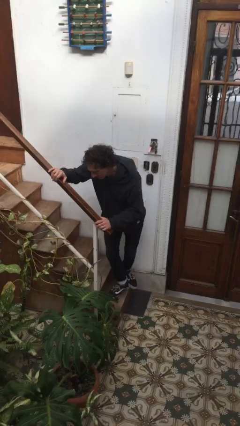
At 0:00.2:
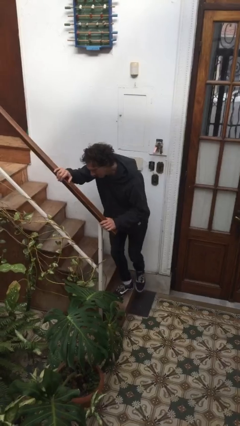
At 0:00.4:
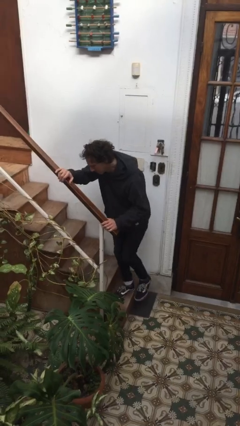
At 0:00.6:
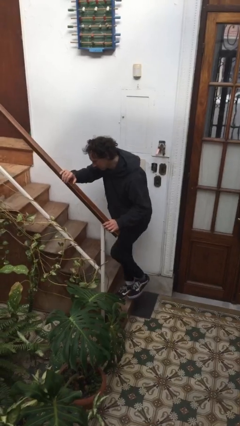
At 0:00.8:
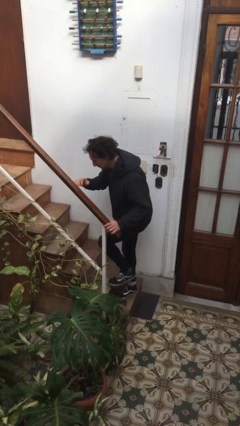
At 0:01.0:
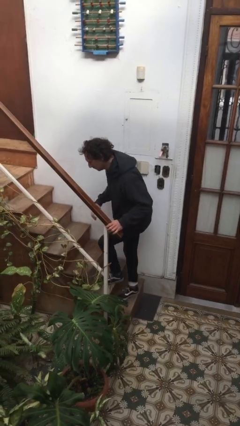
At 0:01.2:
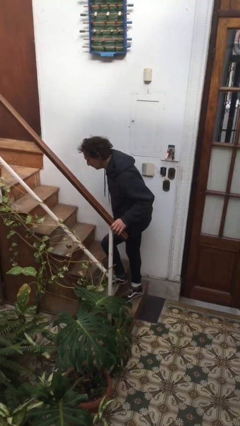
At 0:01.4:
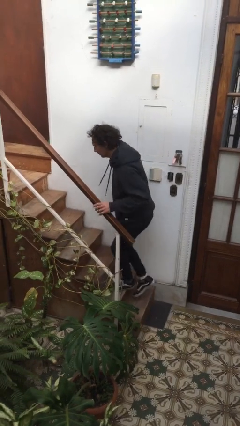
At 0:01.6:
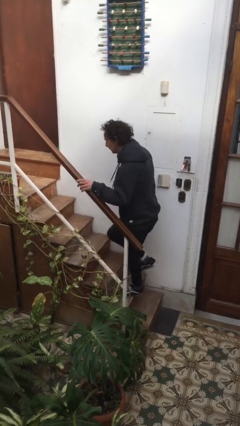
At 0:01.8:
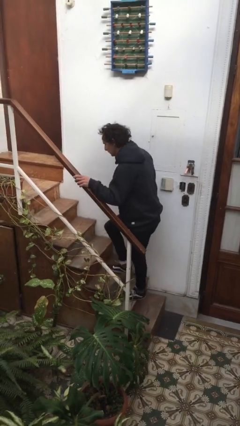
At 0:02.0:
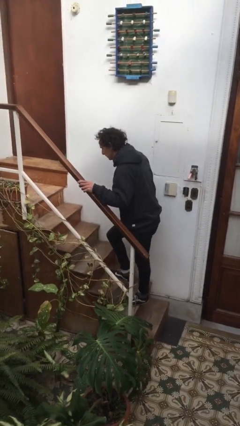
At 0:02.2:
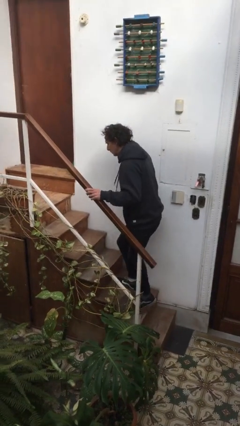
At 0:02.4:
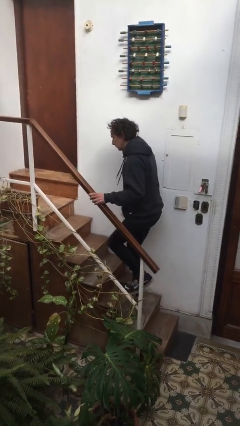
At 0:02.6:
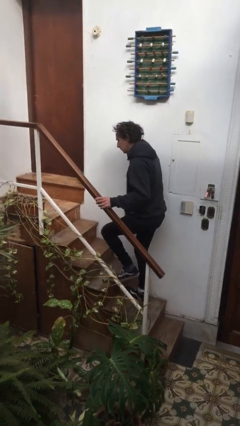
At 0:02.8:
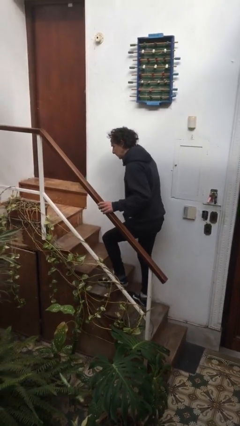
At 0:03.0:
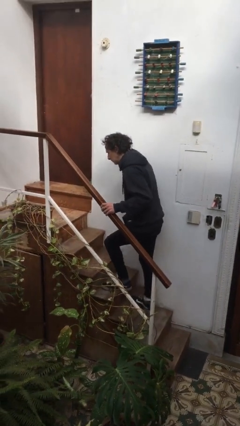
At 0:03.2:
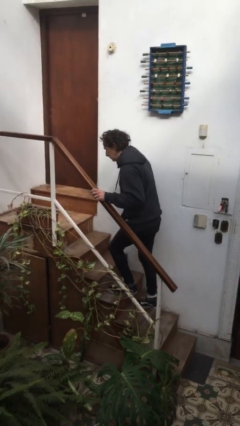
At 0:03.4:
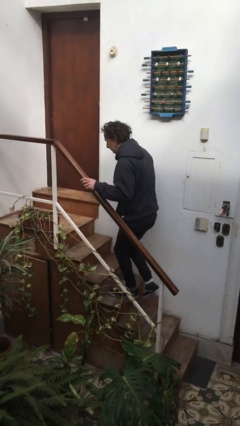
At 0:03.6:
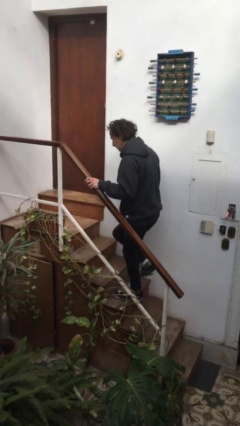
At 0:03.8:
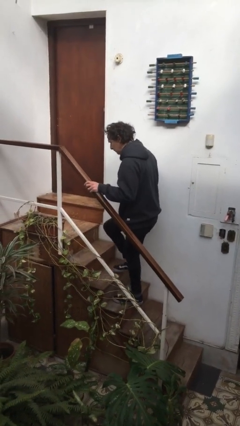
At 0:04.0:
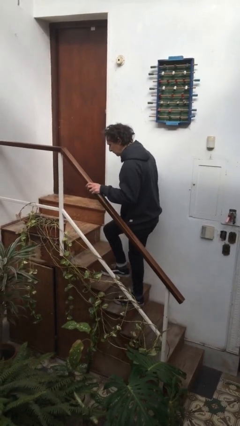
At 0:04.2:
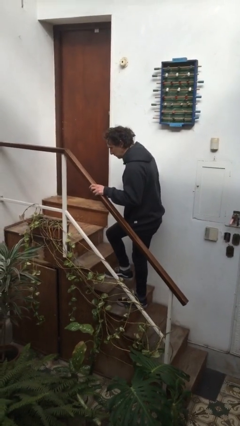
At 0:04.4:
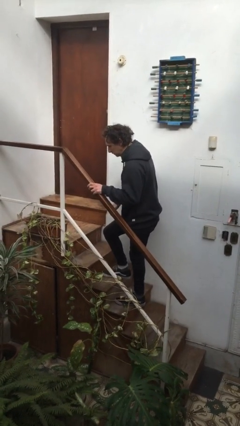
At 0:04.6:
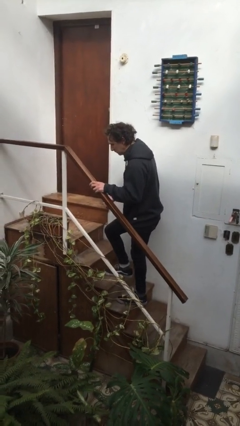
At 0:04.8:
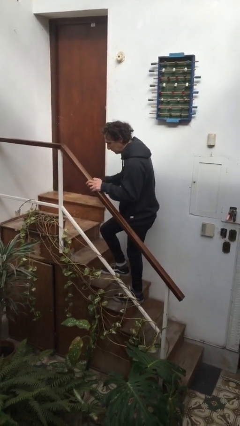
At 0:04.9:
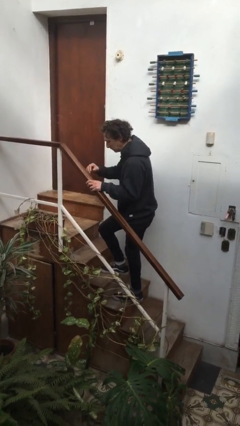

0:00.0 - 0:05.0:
person climbs up stairs

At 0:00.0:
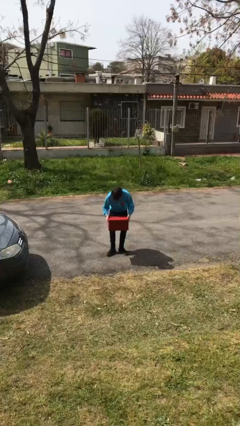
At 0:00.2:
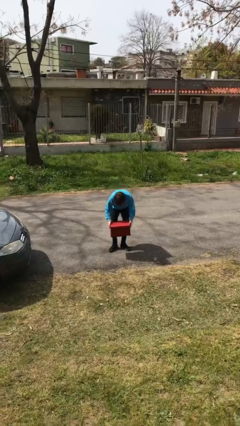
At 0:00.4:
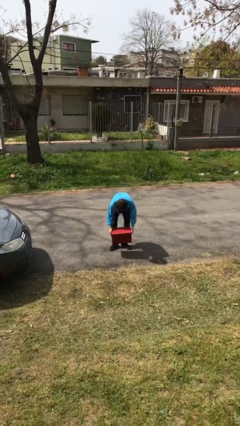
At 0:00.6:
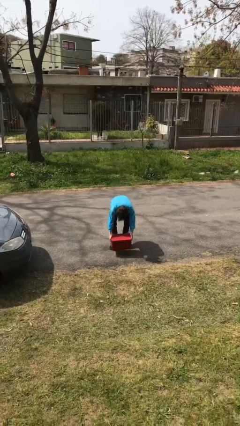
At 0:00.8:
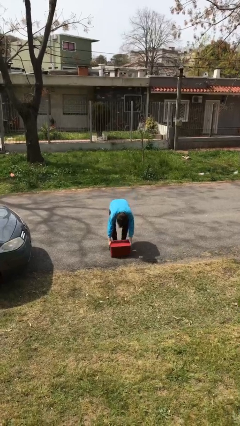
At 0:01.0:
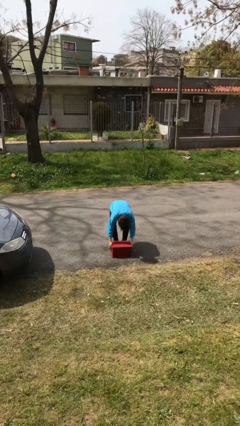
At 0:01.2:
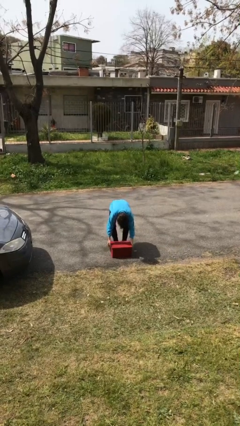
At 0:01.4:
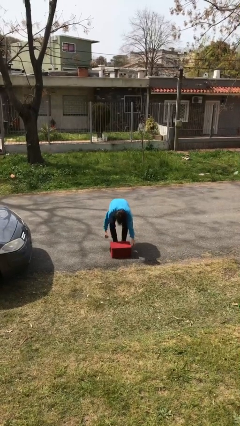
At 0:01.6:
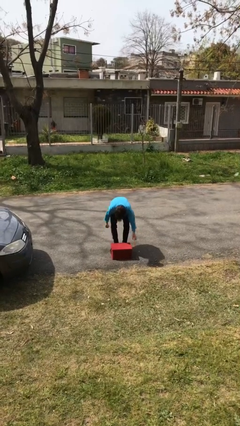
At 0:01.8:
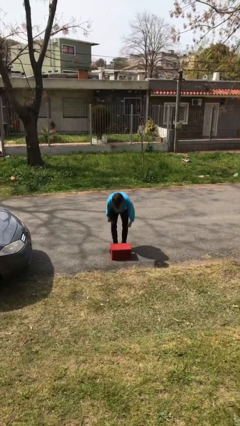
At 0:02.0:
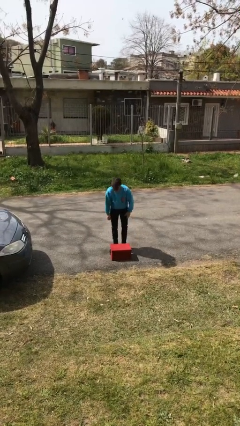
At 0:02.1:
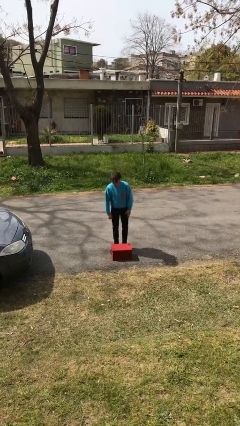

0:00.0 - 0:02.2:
person puts down object on floor

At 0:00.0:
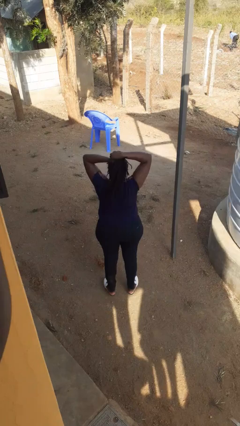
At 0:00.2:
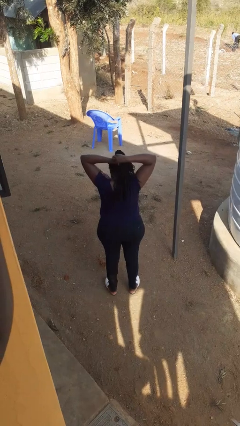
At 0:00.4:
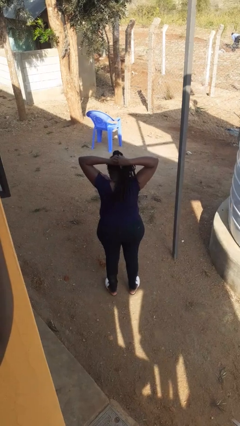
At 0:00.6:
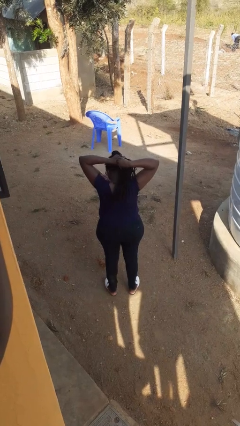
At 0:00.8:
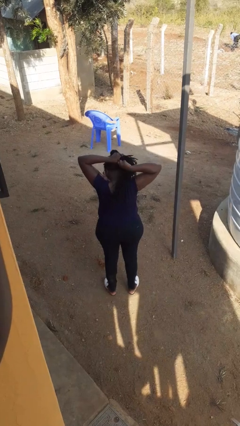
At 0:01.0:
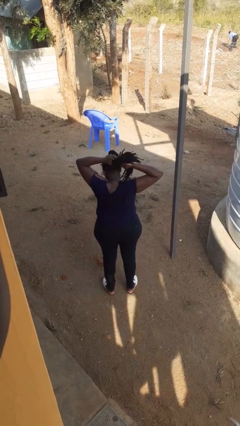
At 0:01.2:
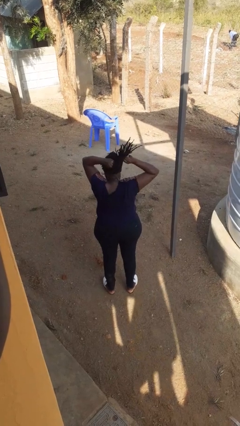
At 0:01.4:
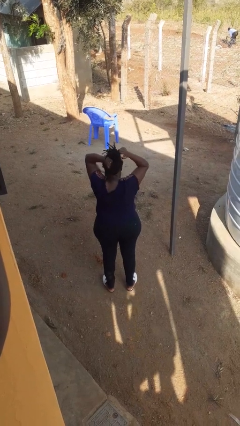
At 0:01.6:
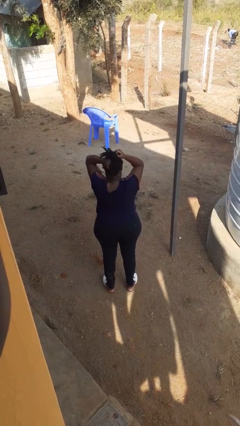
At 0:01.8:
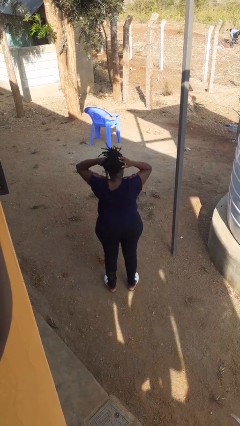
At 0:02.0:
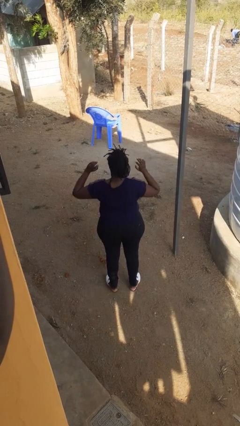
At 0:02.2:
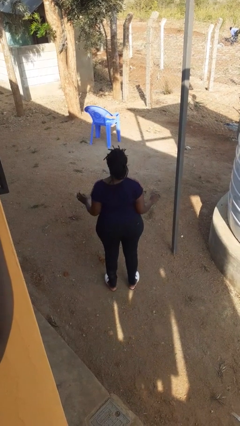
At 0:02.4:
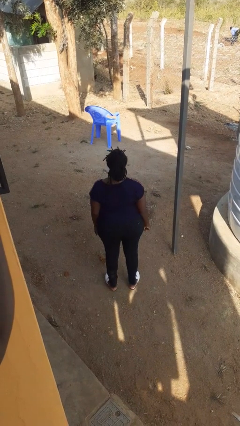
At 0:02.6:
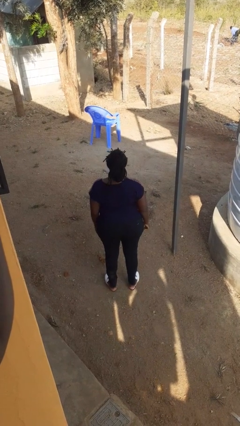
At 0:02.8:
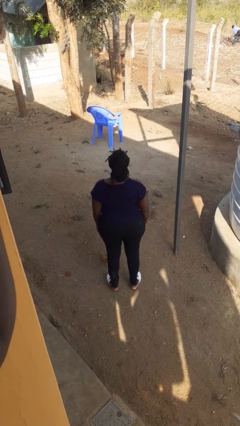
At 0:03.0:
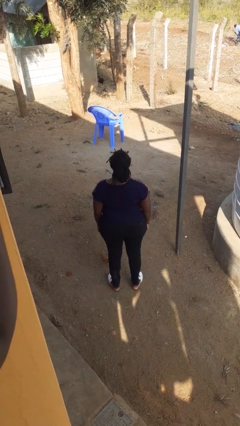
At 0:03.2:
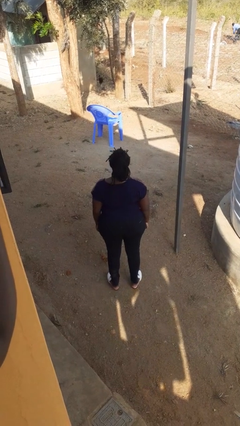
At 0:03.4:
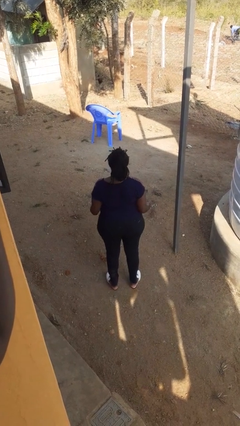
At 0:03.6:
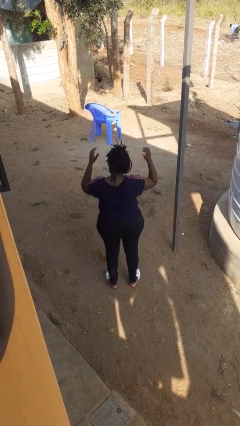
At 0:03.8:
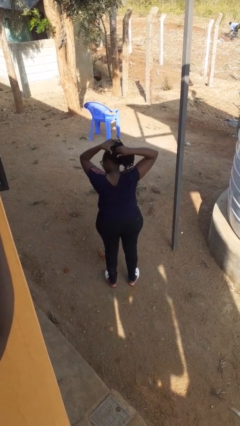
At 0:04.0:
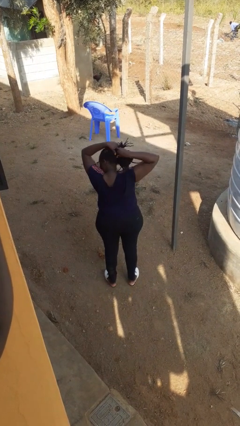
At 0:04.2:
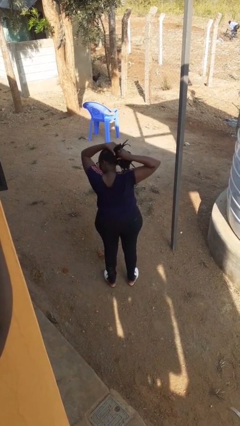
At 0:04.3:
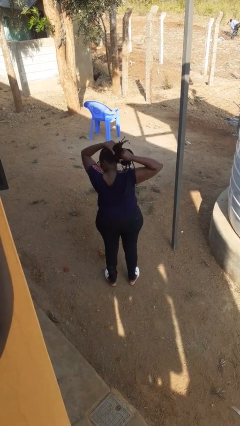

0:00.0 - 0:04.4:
person puts hair in ponytail

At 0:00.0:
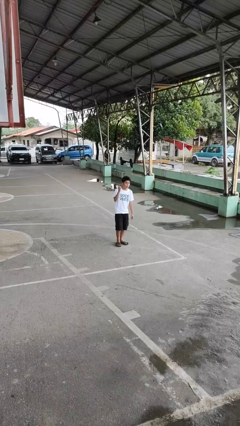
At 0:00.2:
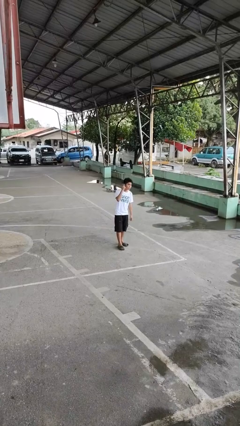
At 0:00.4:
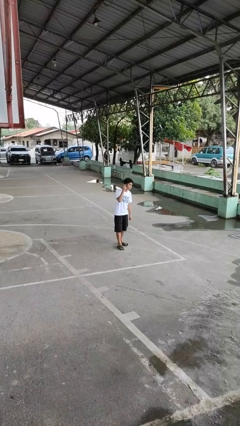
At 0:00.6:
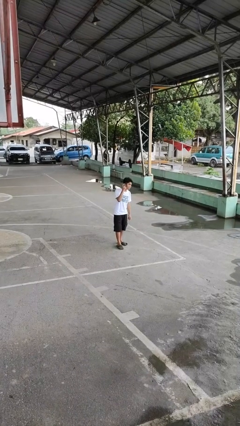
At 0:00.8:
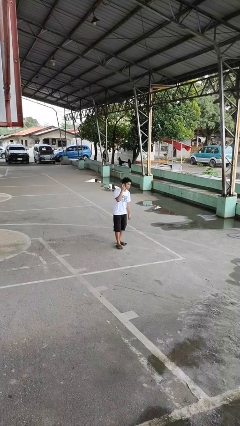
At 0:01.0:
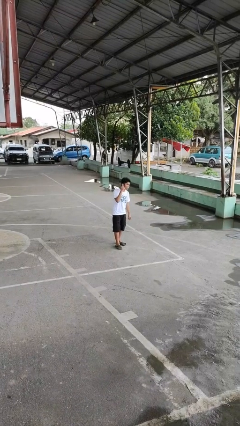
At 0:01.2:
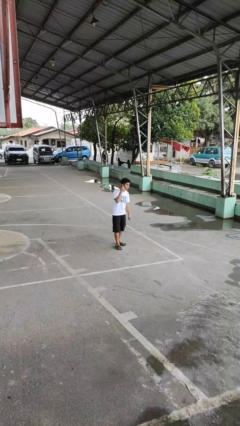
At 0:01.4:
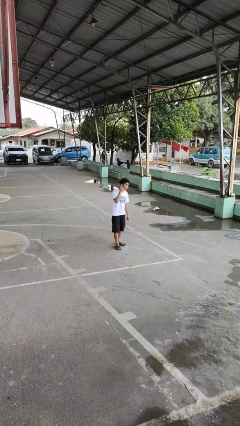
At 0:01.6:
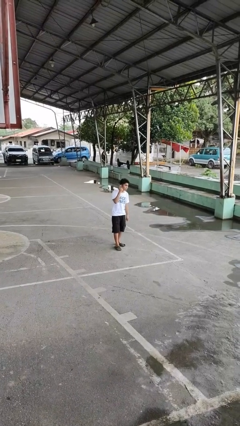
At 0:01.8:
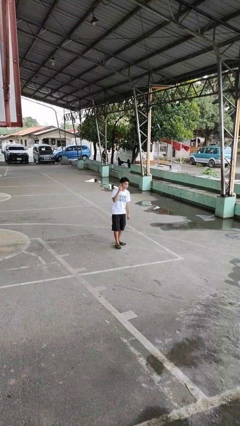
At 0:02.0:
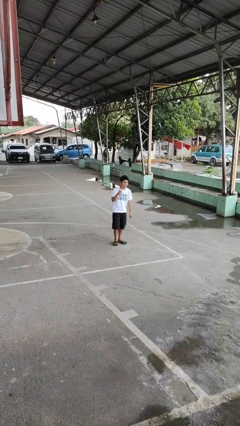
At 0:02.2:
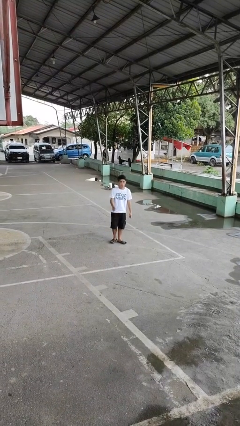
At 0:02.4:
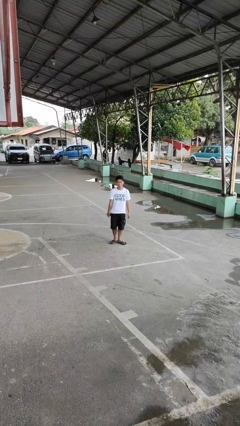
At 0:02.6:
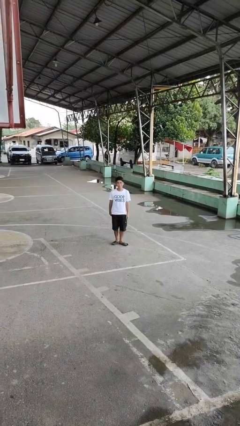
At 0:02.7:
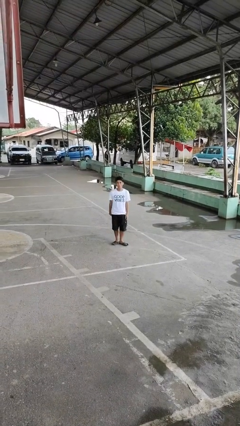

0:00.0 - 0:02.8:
person gestures listen closely

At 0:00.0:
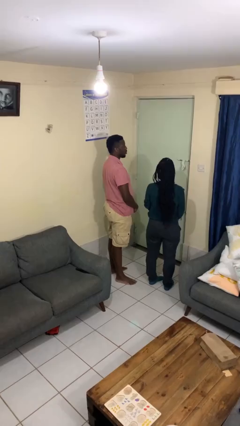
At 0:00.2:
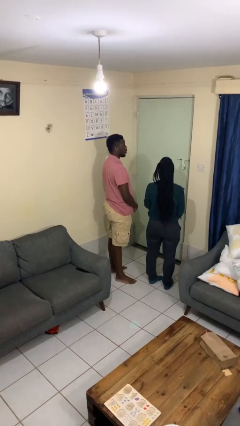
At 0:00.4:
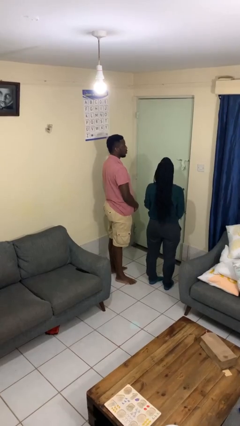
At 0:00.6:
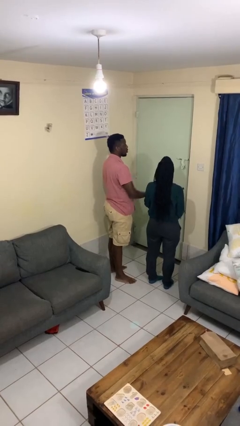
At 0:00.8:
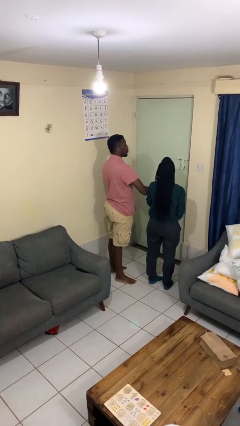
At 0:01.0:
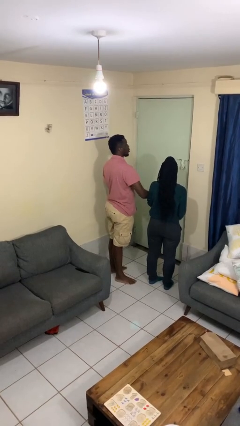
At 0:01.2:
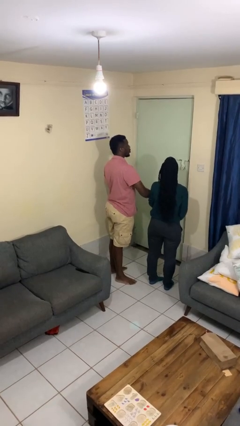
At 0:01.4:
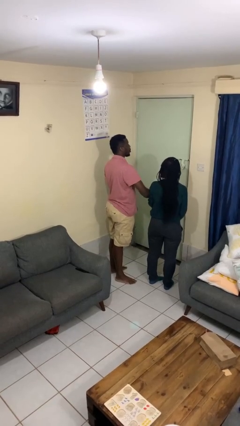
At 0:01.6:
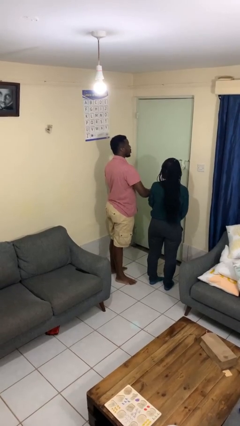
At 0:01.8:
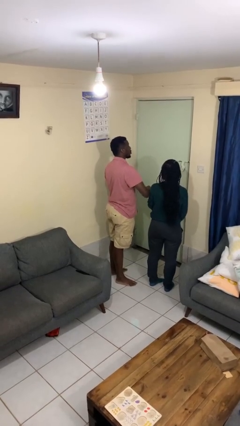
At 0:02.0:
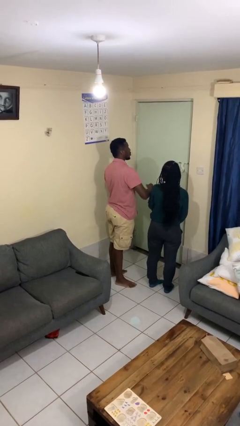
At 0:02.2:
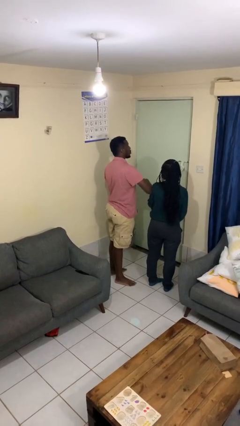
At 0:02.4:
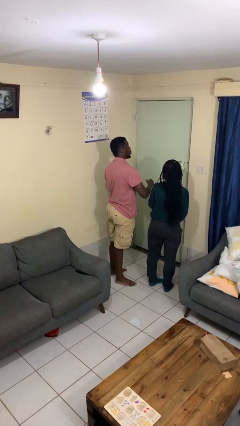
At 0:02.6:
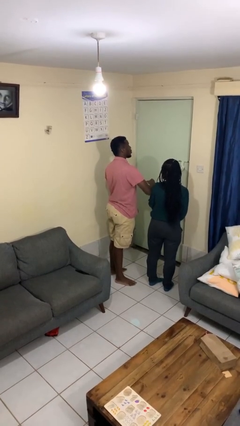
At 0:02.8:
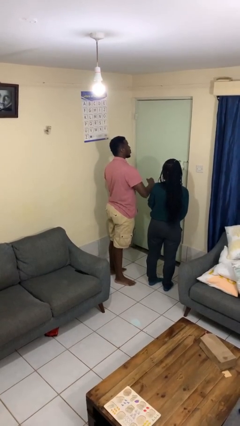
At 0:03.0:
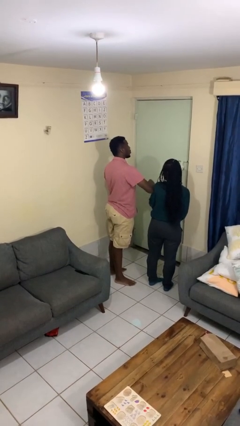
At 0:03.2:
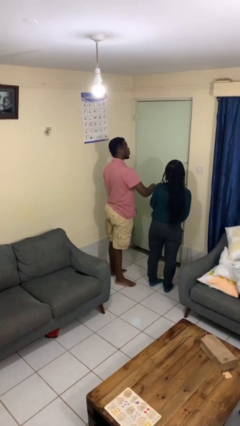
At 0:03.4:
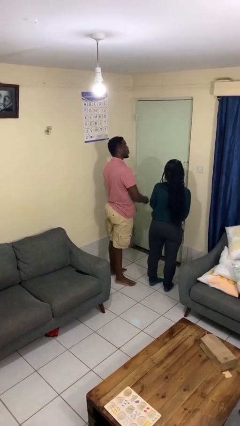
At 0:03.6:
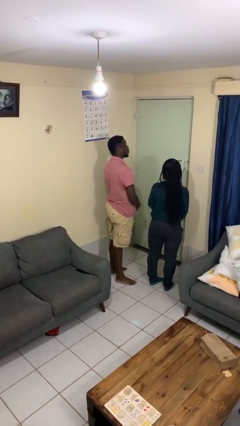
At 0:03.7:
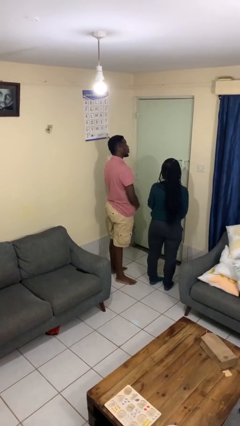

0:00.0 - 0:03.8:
person nudges person with elbow
